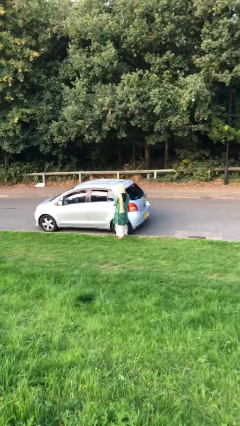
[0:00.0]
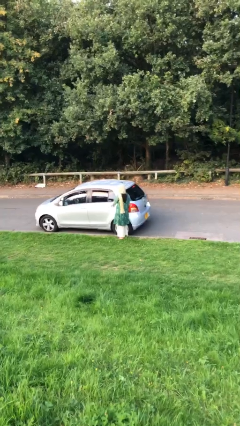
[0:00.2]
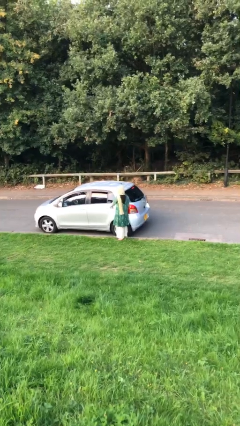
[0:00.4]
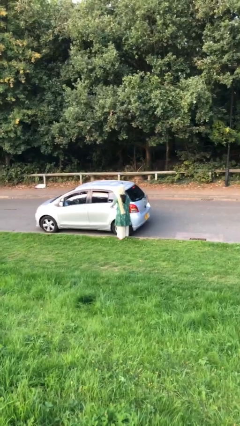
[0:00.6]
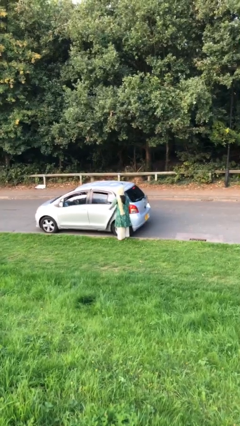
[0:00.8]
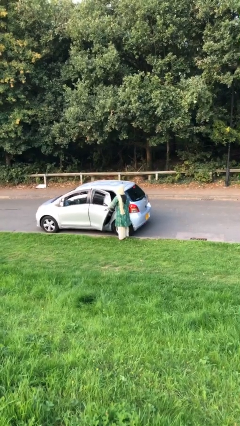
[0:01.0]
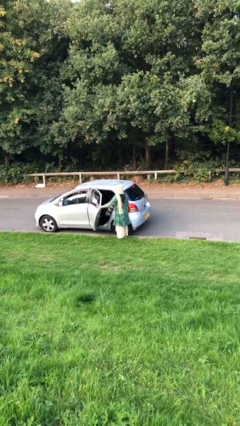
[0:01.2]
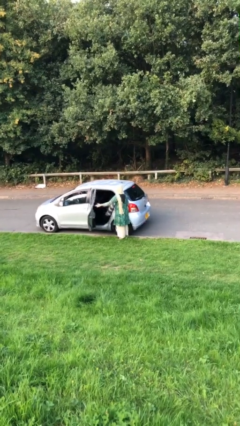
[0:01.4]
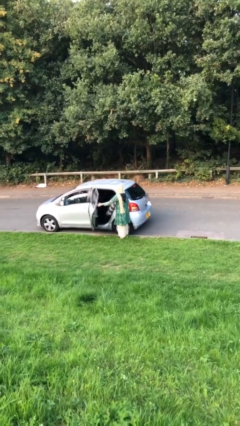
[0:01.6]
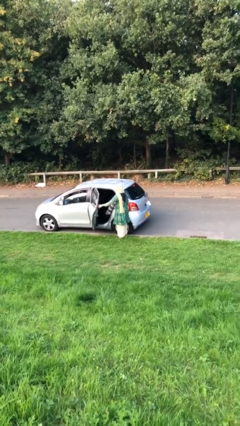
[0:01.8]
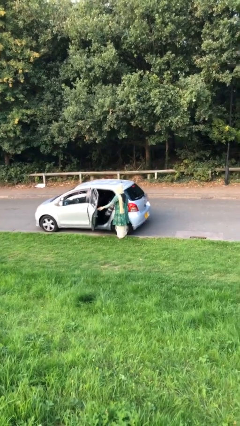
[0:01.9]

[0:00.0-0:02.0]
person opens car door

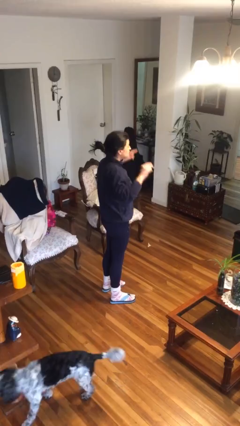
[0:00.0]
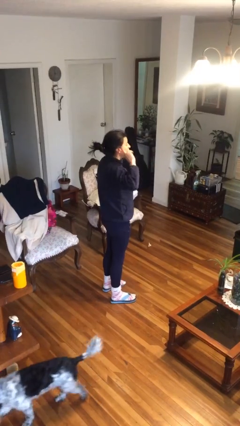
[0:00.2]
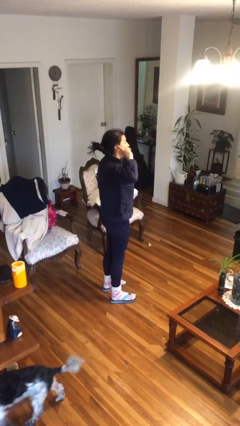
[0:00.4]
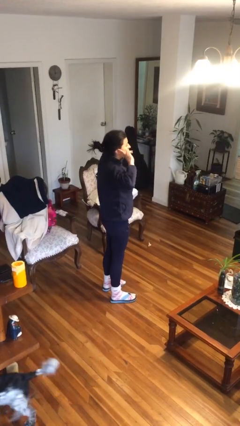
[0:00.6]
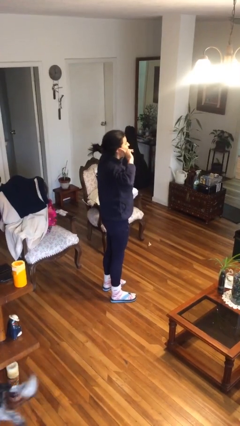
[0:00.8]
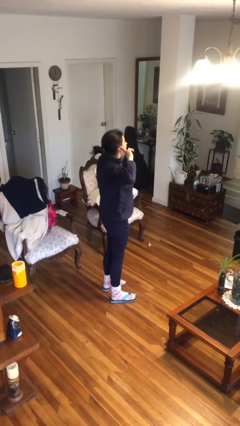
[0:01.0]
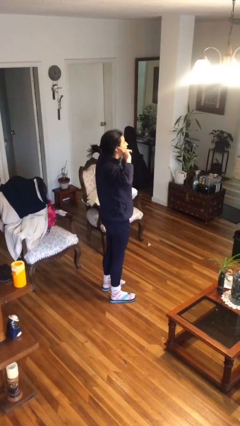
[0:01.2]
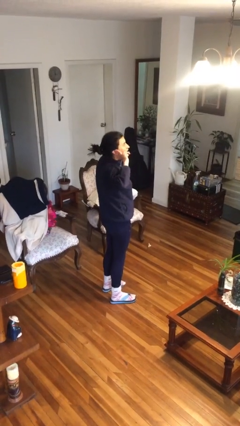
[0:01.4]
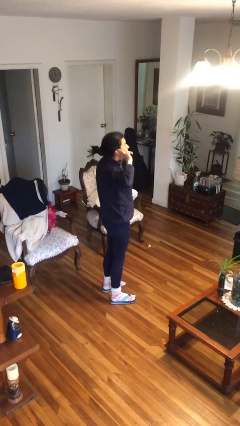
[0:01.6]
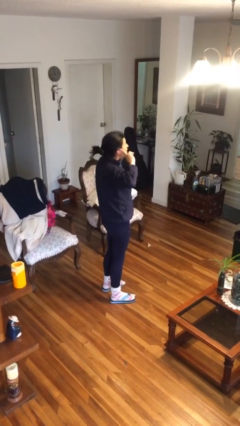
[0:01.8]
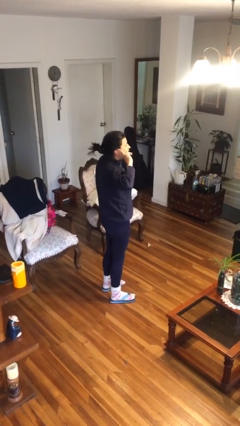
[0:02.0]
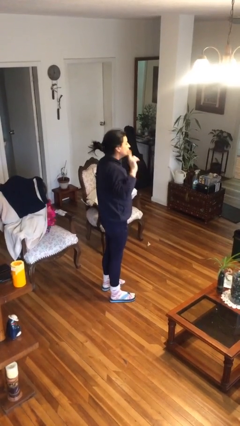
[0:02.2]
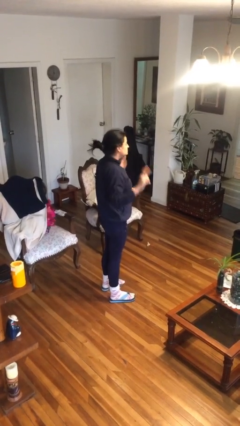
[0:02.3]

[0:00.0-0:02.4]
person puts fingers in ear

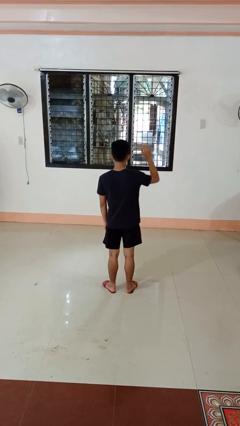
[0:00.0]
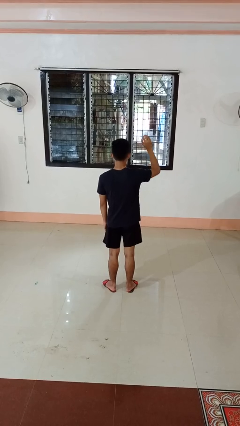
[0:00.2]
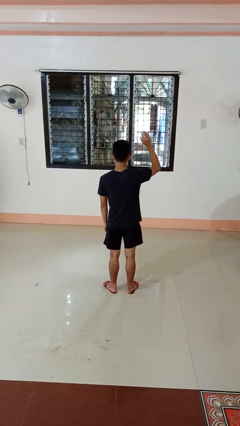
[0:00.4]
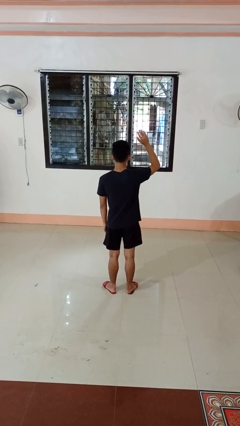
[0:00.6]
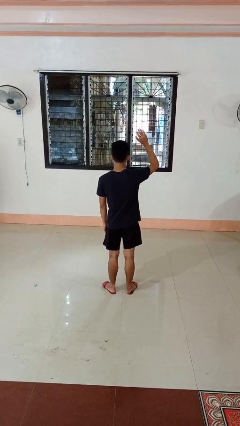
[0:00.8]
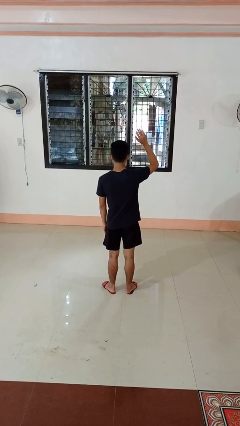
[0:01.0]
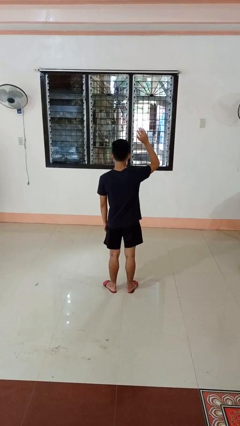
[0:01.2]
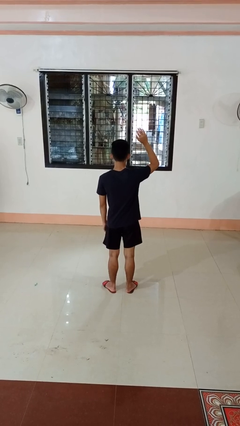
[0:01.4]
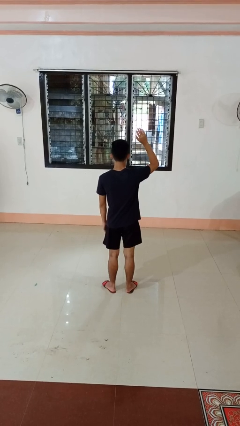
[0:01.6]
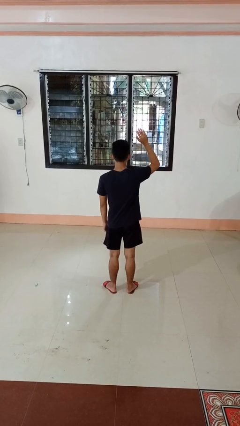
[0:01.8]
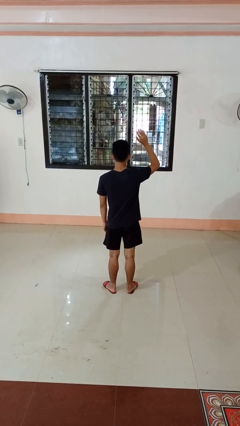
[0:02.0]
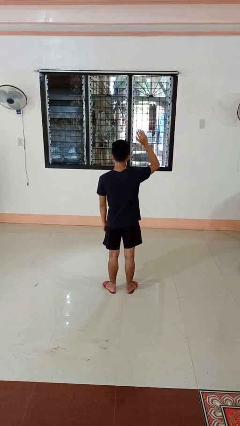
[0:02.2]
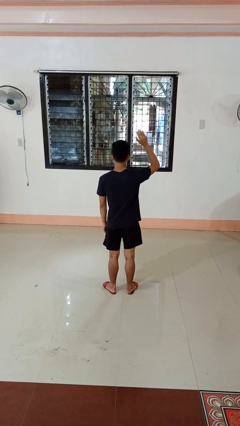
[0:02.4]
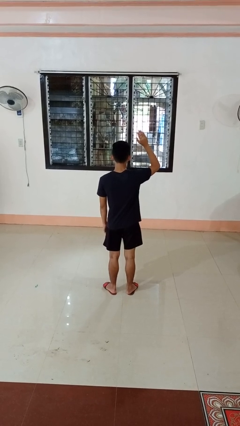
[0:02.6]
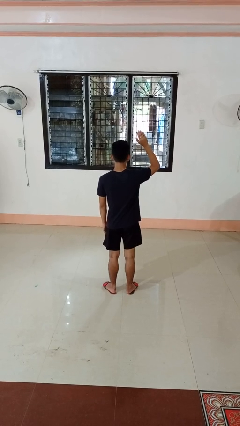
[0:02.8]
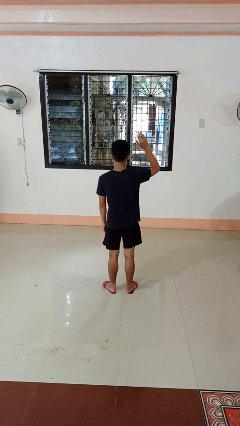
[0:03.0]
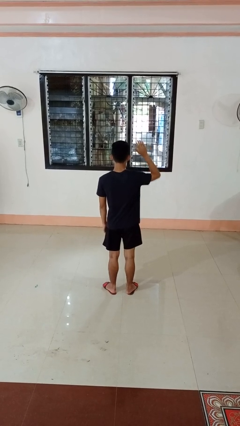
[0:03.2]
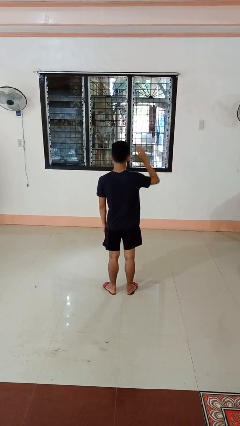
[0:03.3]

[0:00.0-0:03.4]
person gestures raise hand

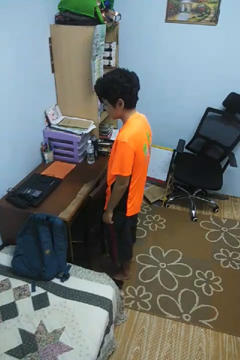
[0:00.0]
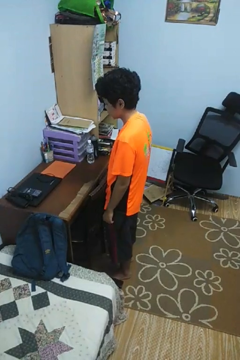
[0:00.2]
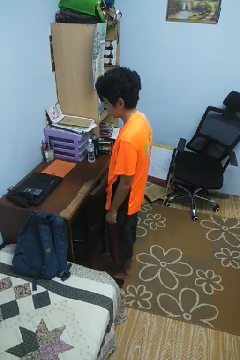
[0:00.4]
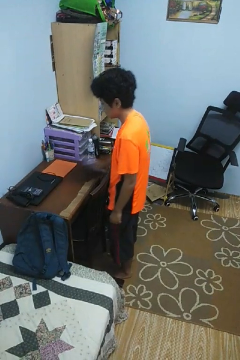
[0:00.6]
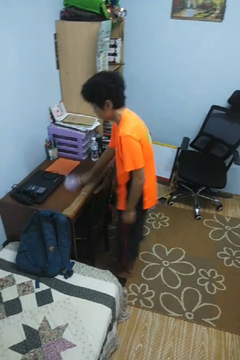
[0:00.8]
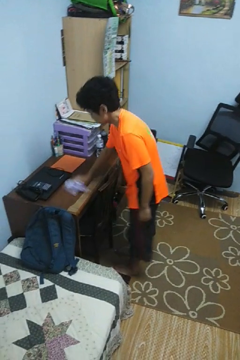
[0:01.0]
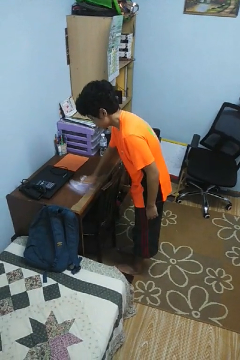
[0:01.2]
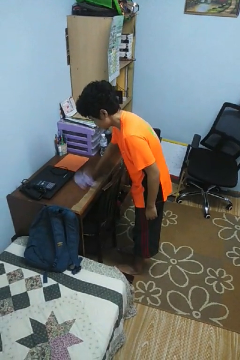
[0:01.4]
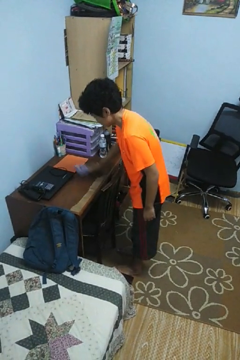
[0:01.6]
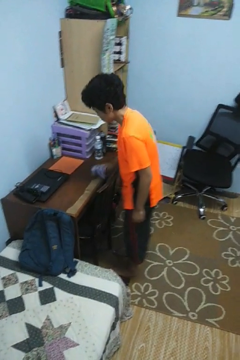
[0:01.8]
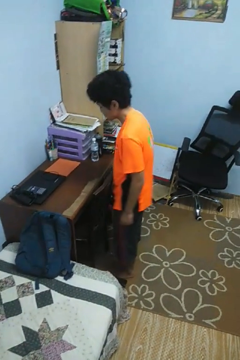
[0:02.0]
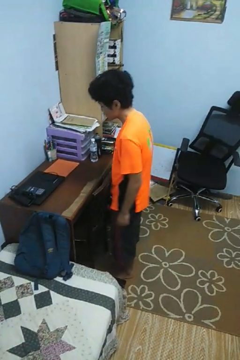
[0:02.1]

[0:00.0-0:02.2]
person cleans table with rag

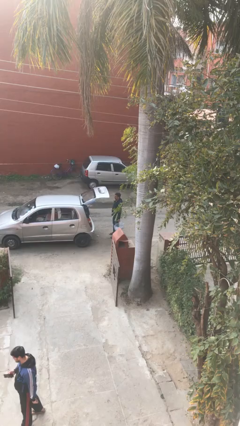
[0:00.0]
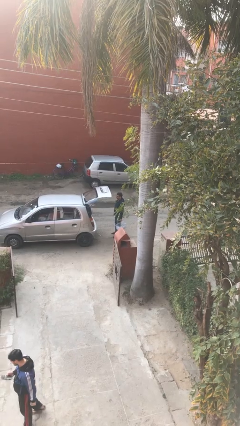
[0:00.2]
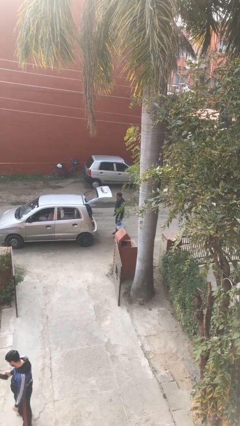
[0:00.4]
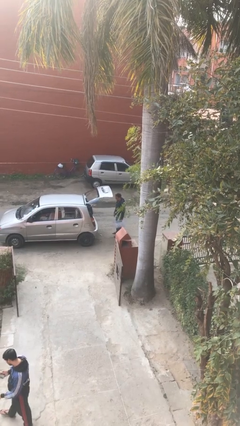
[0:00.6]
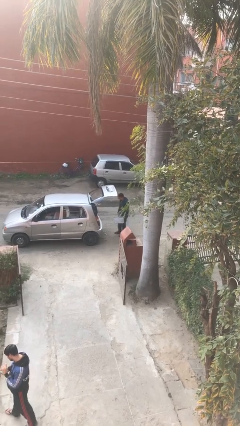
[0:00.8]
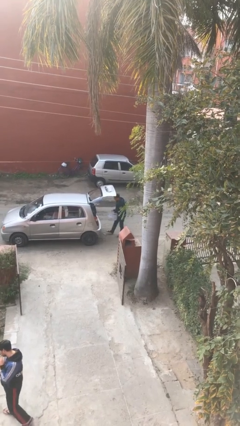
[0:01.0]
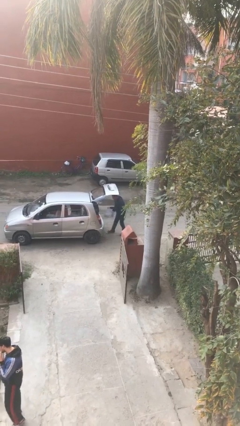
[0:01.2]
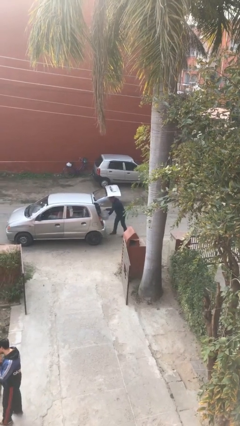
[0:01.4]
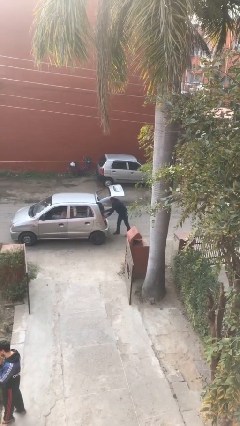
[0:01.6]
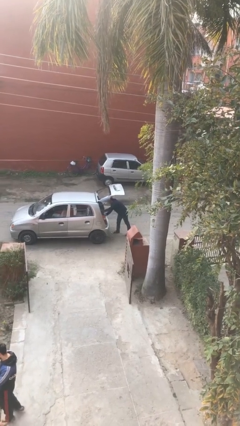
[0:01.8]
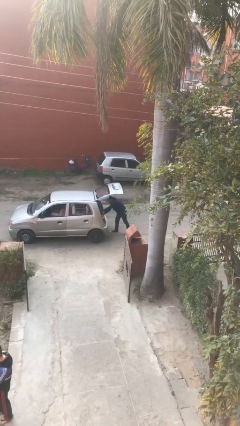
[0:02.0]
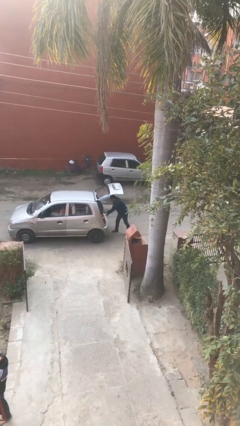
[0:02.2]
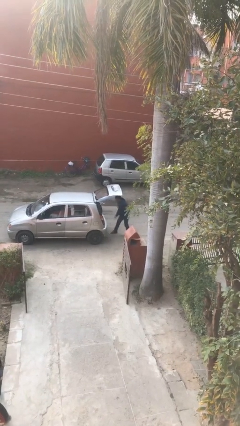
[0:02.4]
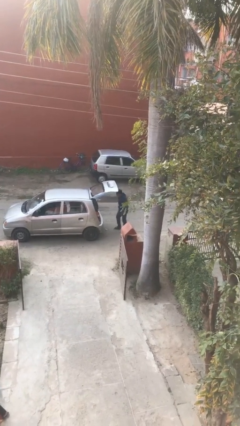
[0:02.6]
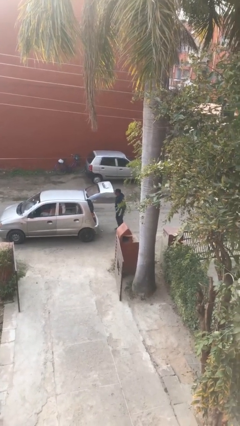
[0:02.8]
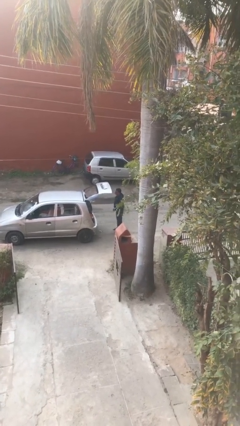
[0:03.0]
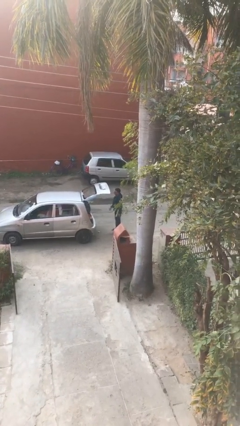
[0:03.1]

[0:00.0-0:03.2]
person loads car

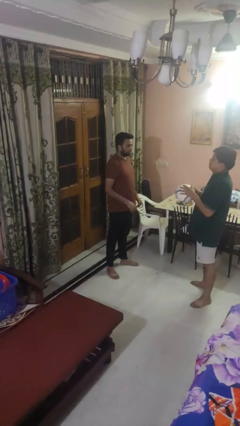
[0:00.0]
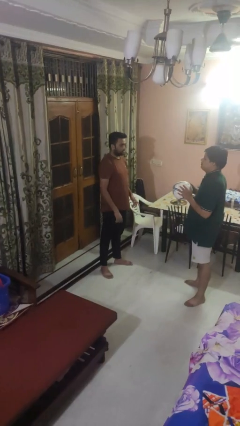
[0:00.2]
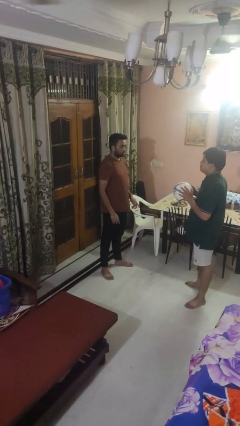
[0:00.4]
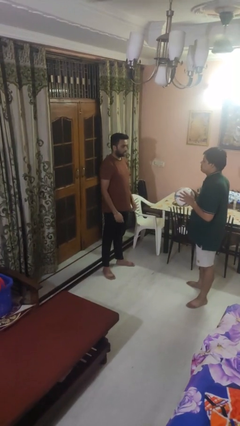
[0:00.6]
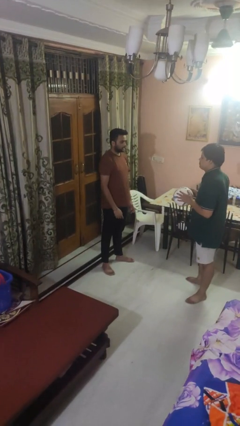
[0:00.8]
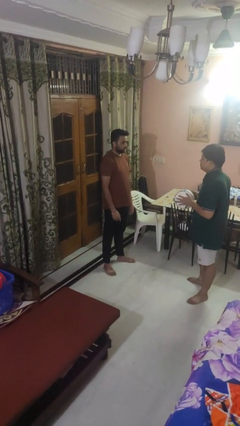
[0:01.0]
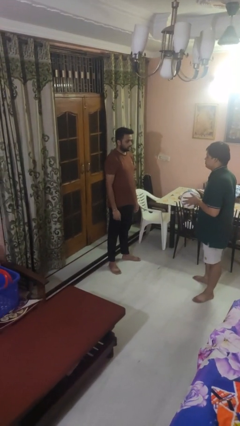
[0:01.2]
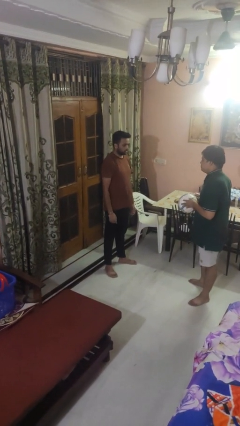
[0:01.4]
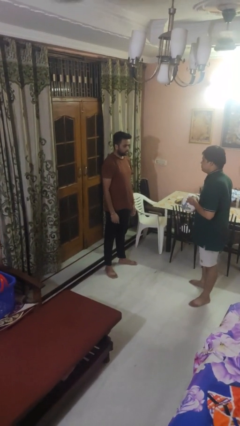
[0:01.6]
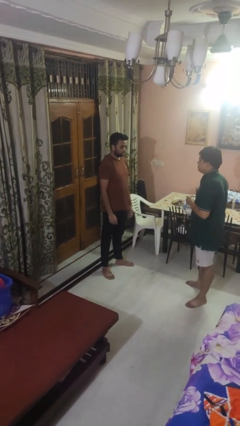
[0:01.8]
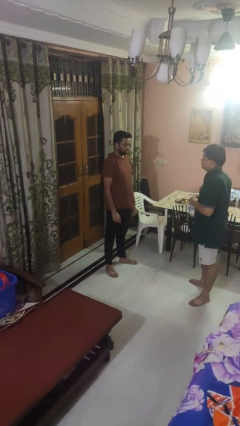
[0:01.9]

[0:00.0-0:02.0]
person throws object to person

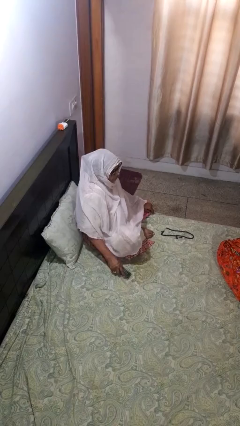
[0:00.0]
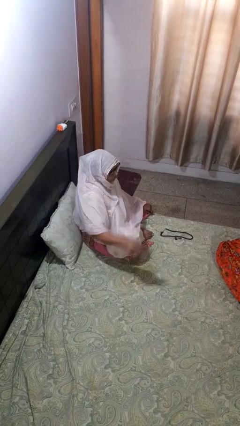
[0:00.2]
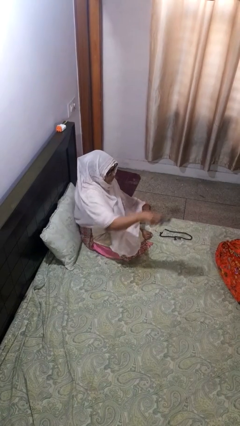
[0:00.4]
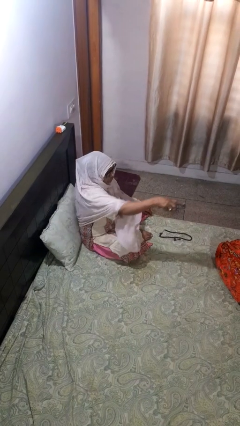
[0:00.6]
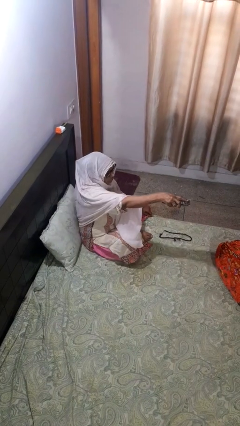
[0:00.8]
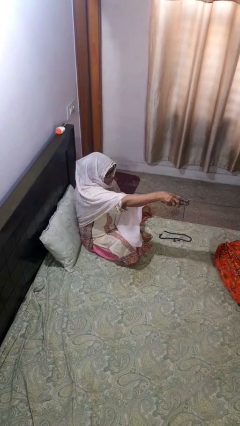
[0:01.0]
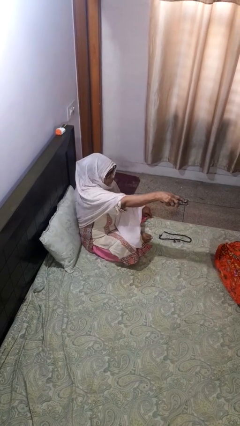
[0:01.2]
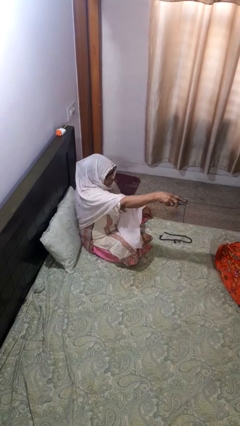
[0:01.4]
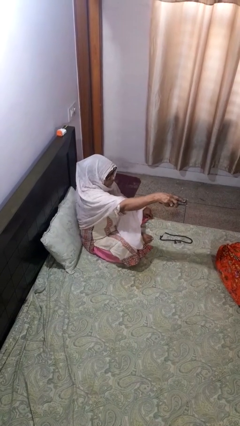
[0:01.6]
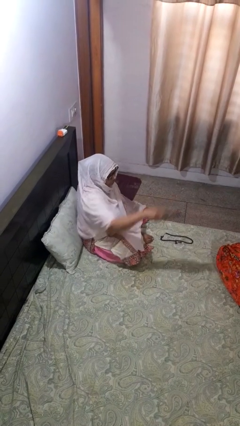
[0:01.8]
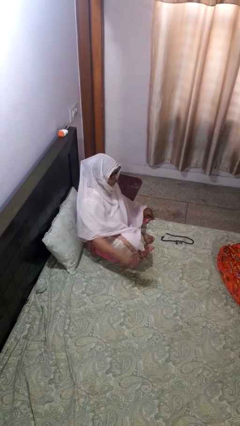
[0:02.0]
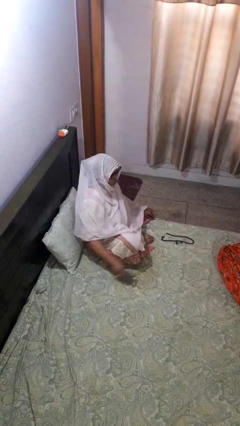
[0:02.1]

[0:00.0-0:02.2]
person uses television remote

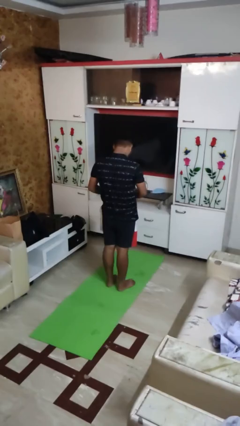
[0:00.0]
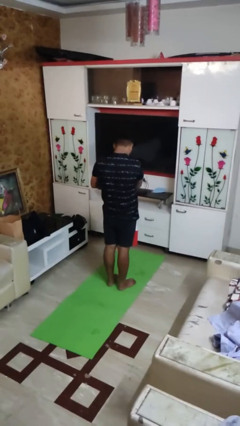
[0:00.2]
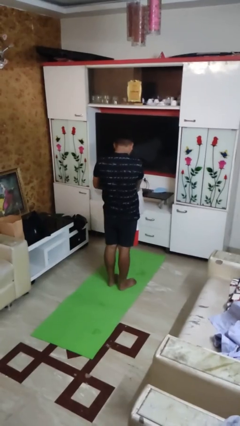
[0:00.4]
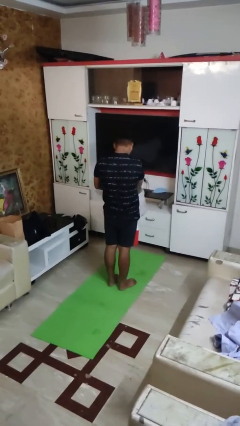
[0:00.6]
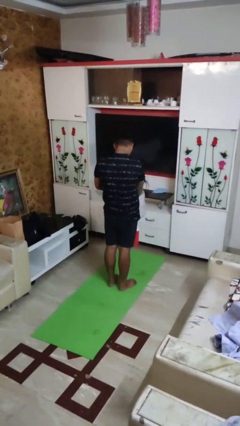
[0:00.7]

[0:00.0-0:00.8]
person puts object into basket
